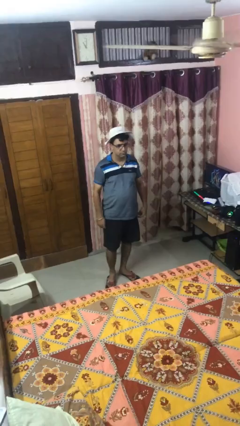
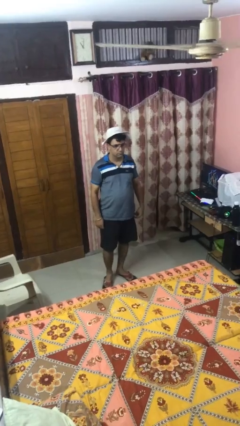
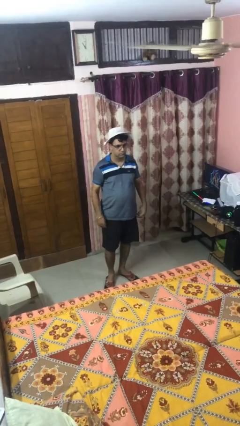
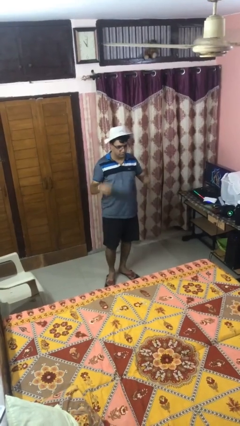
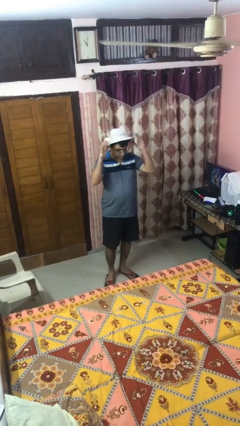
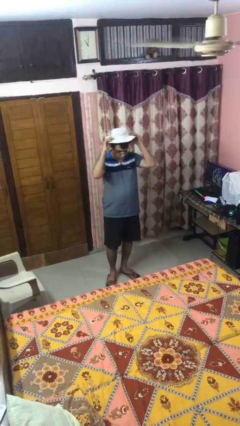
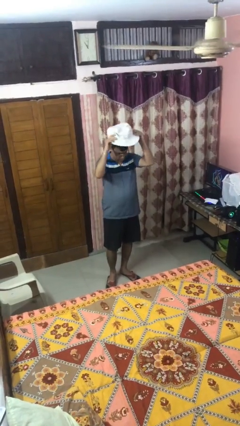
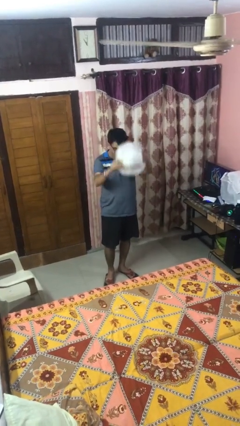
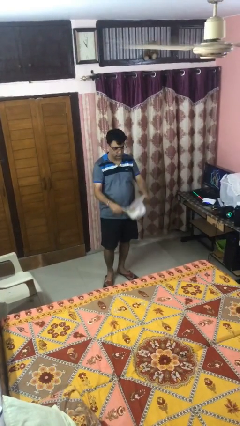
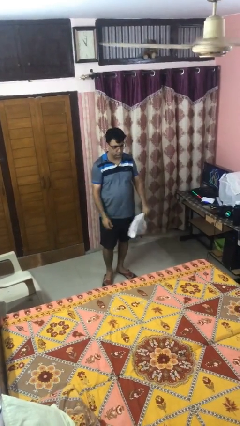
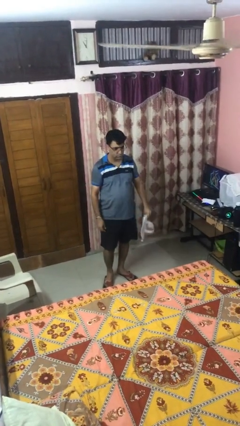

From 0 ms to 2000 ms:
person takes off hat

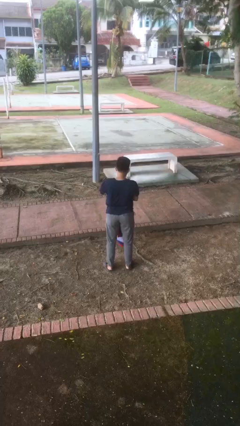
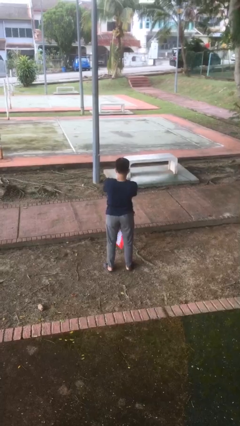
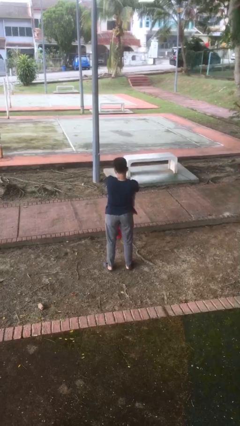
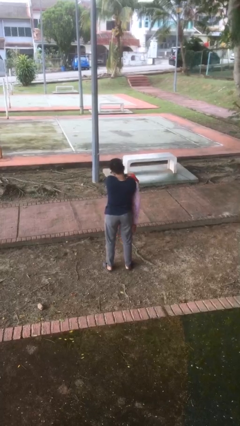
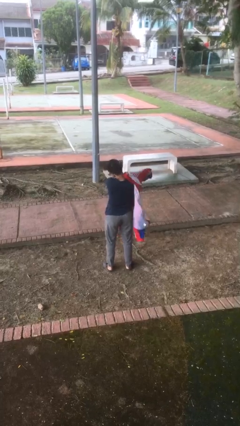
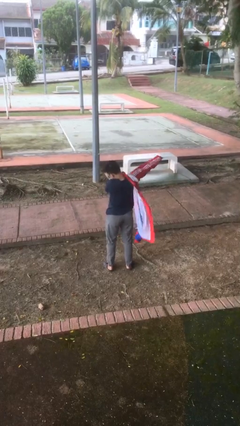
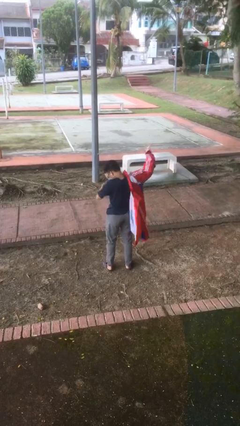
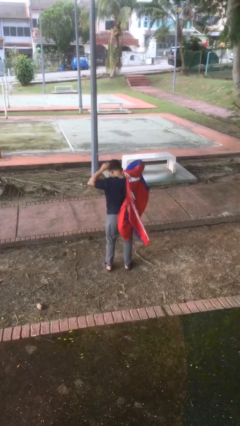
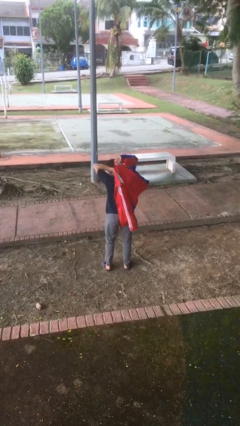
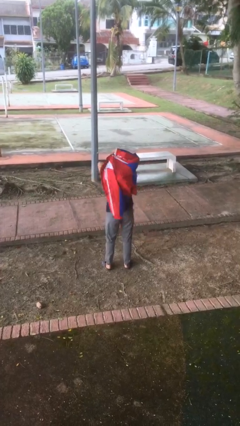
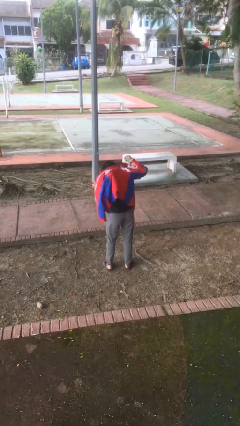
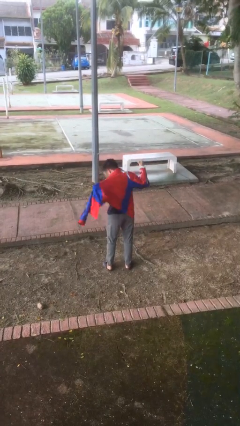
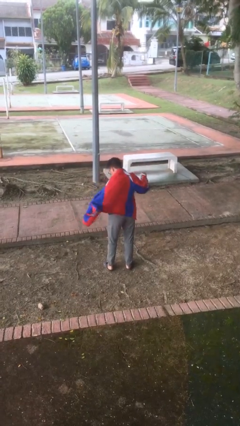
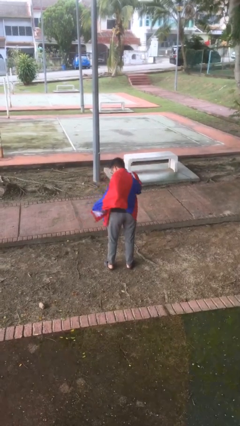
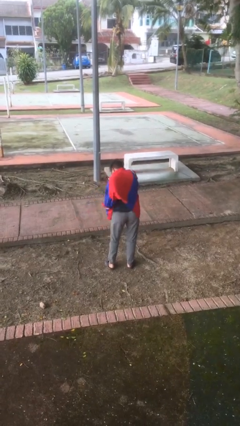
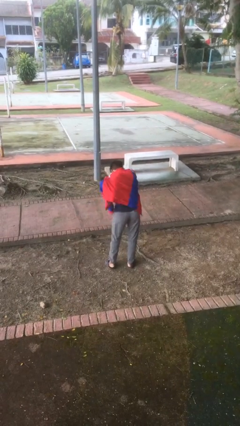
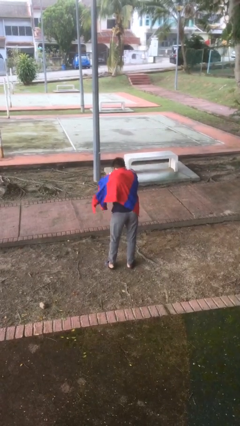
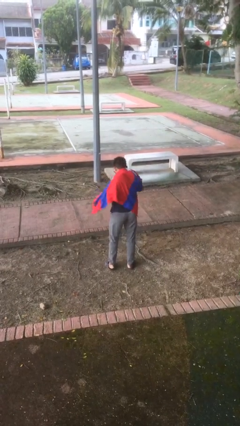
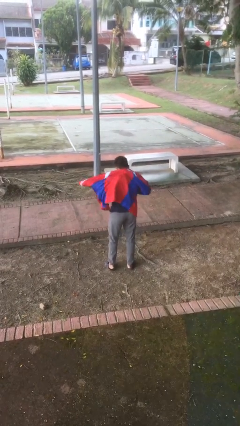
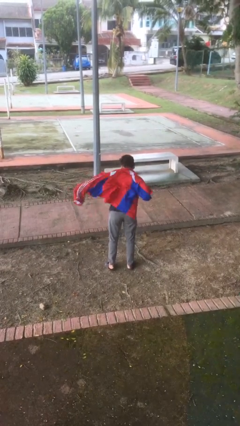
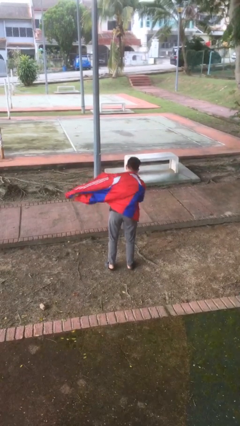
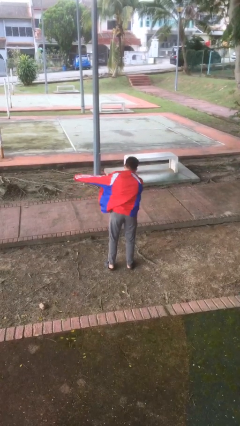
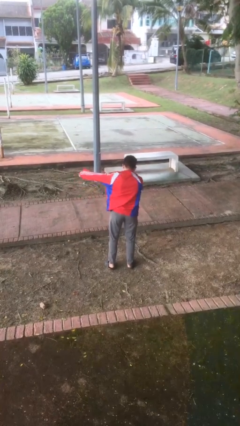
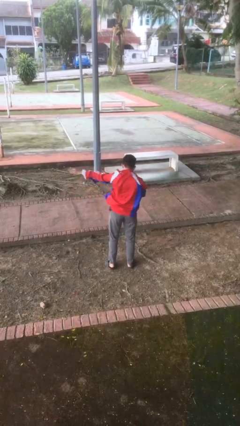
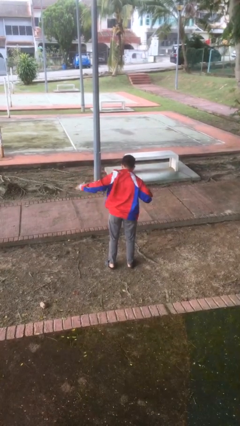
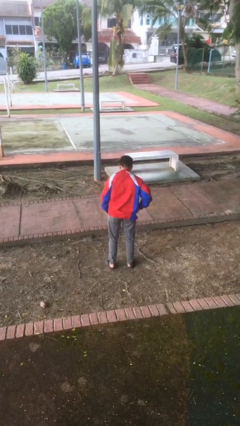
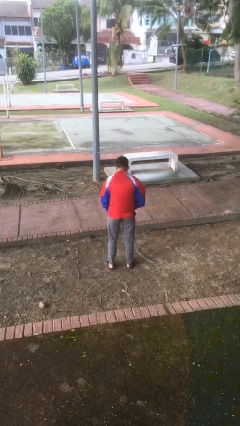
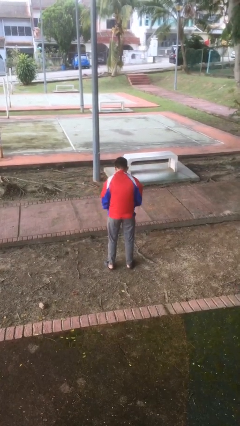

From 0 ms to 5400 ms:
person puts on jacket

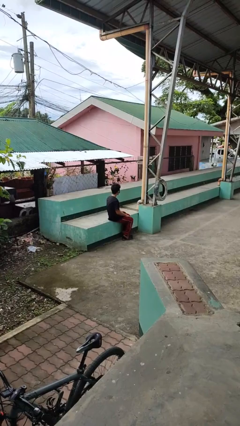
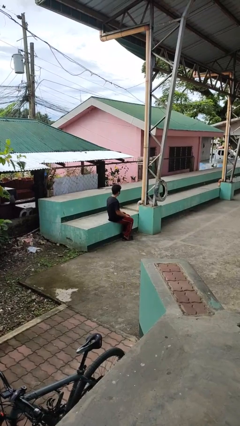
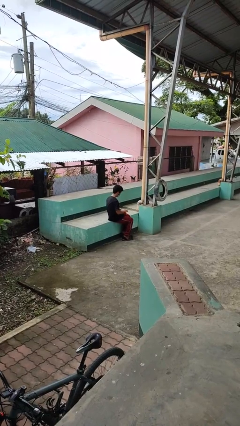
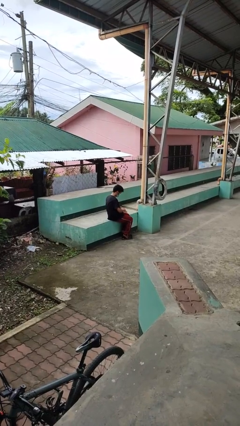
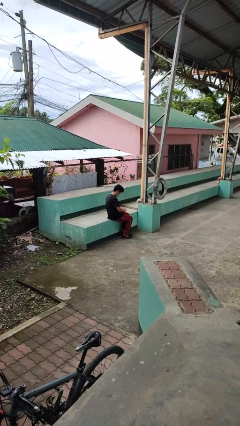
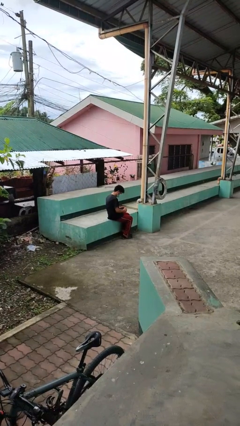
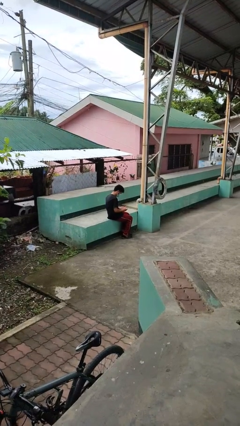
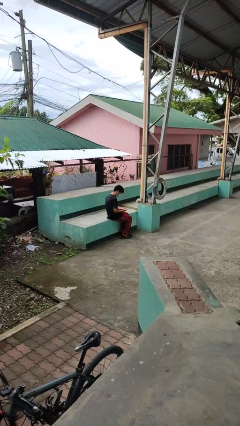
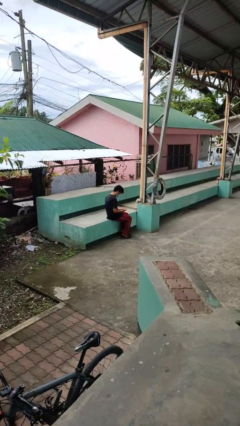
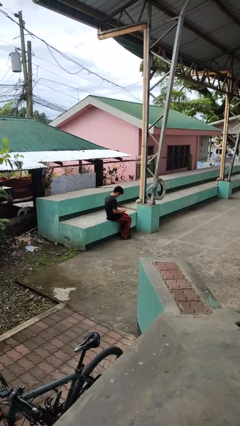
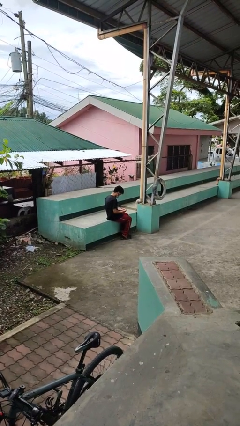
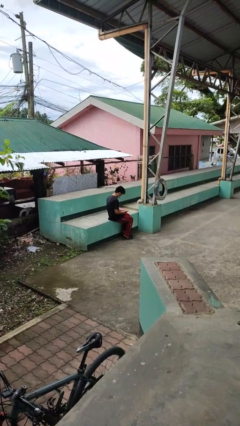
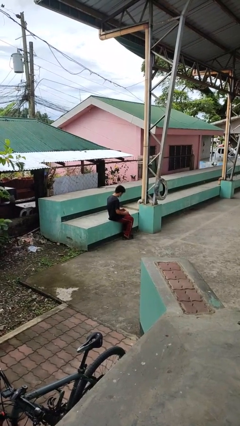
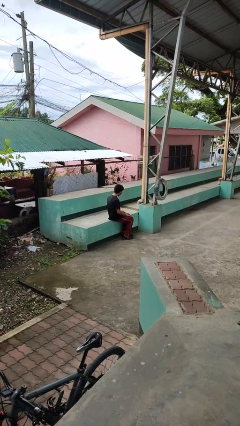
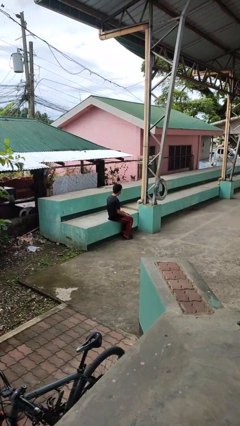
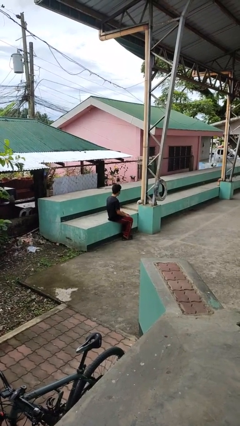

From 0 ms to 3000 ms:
person looks at hands in lap

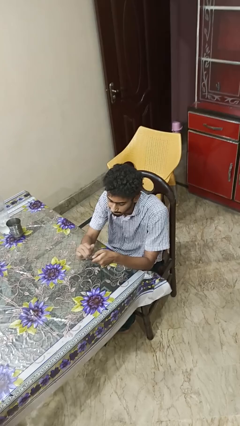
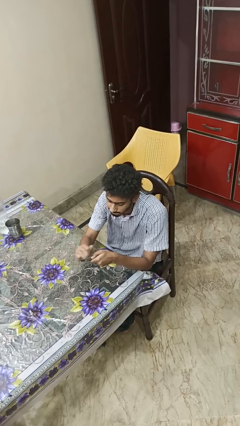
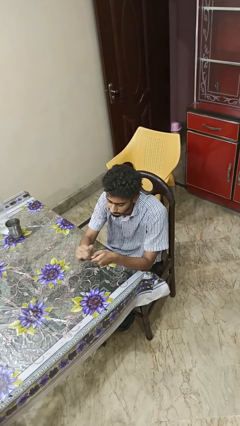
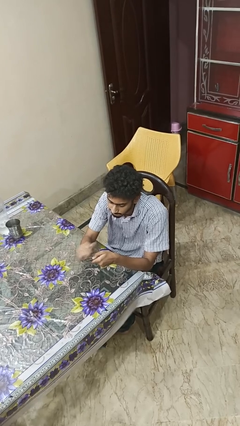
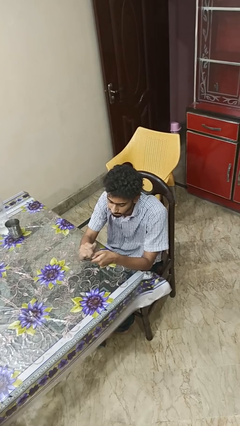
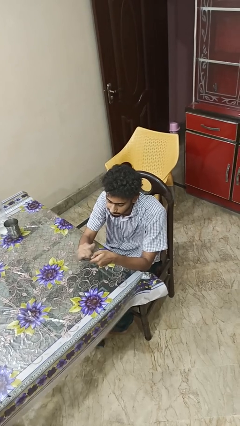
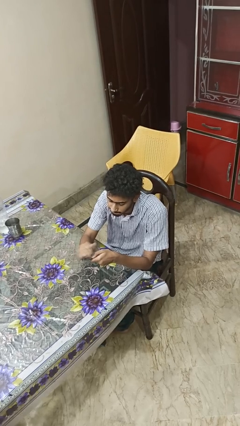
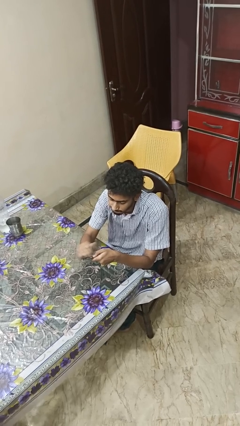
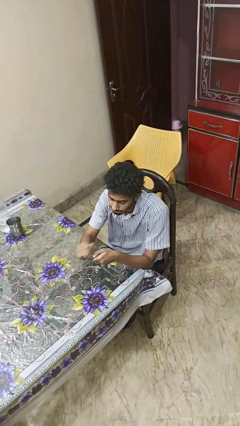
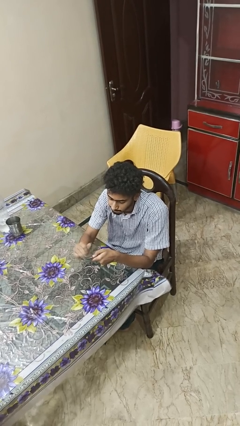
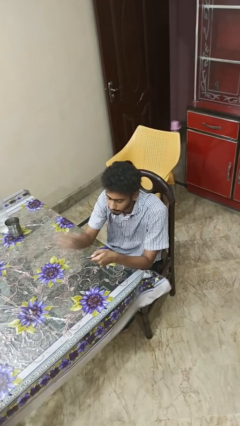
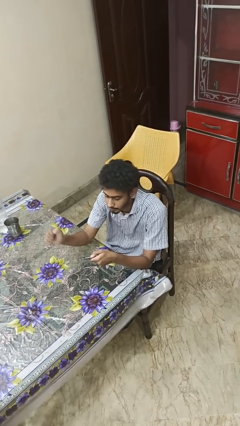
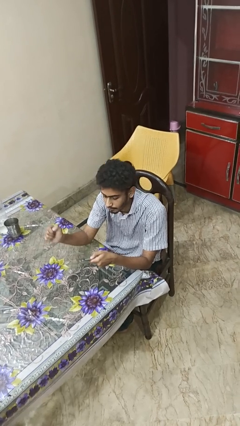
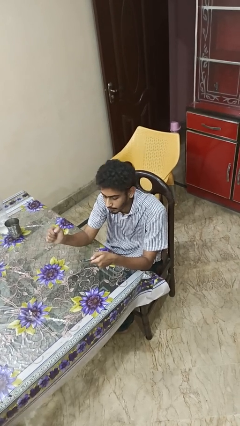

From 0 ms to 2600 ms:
person files fingernails

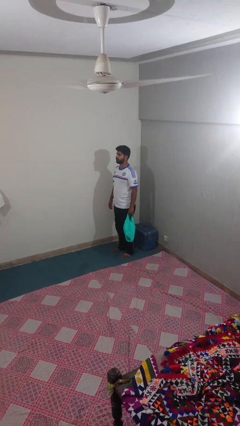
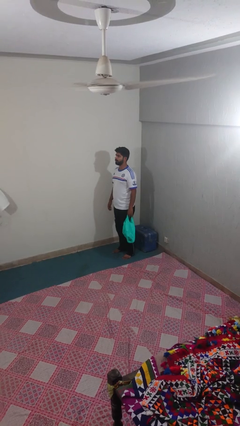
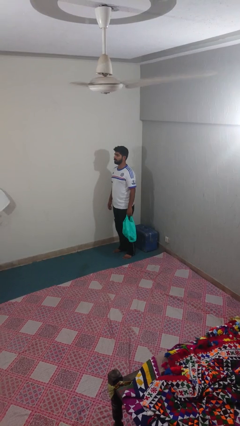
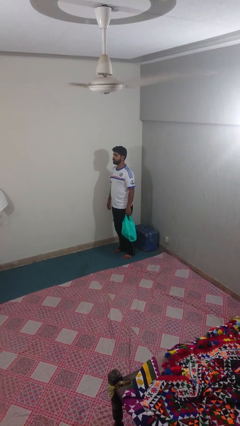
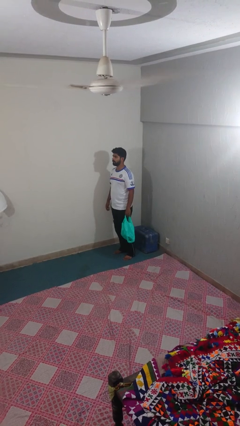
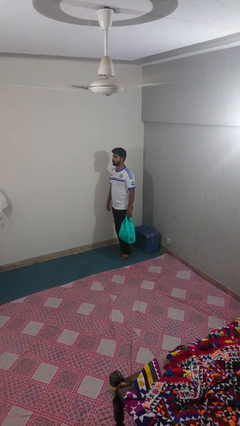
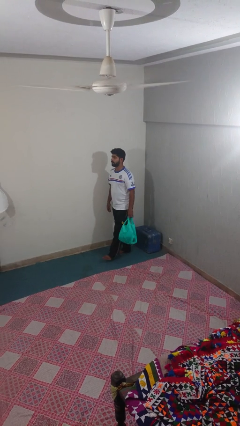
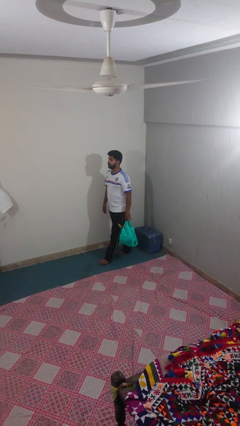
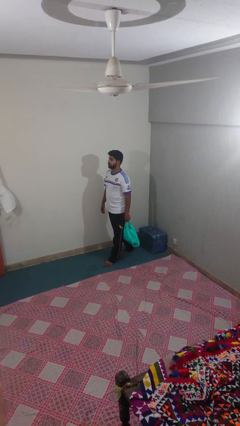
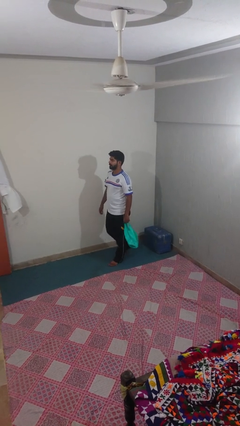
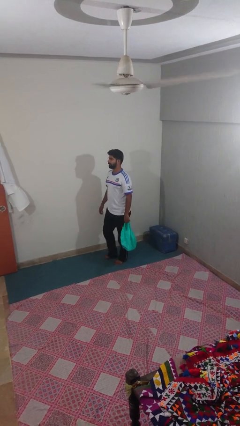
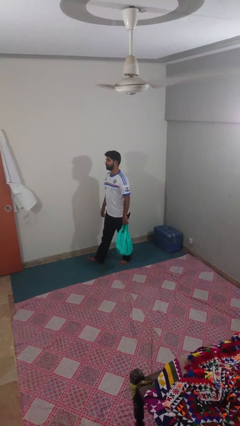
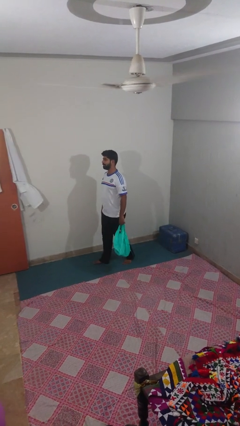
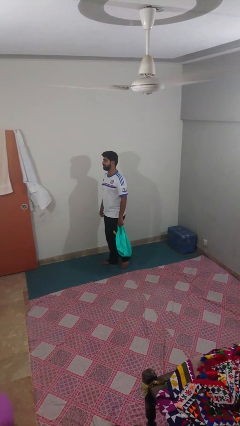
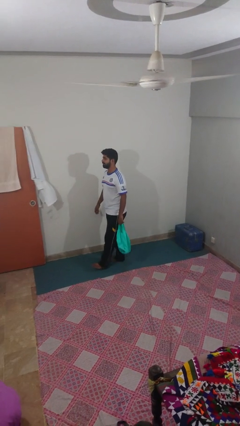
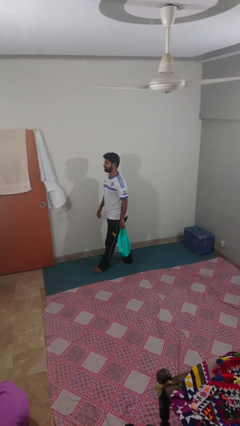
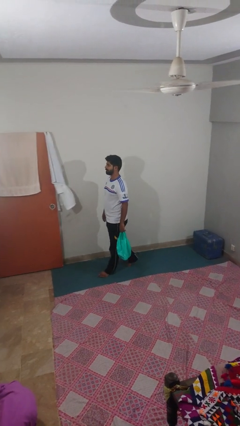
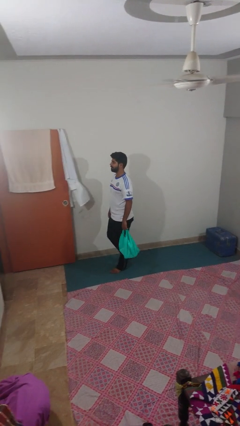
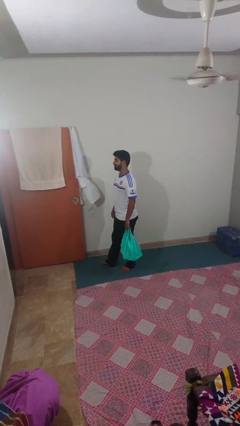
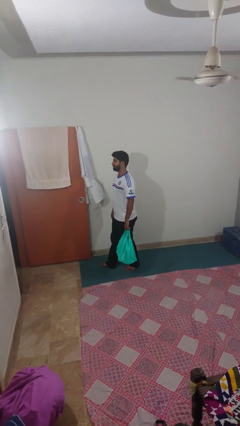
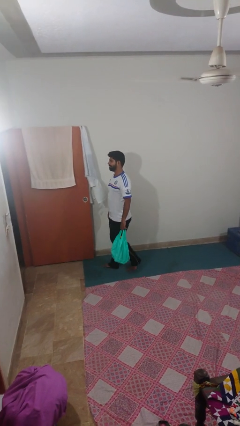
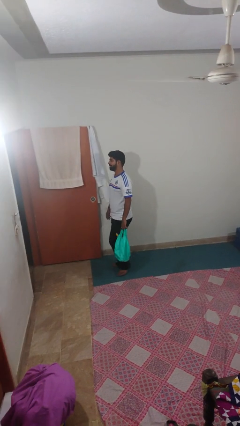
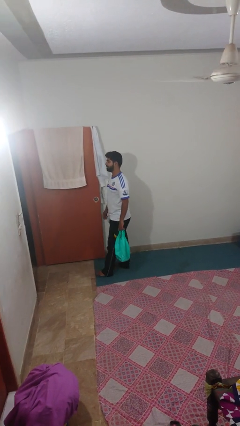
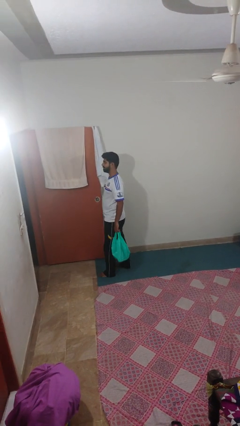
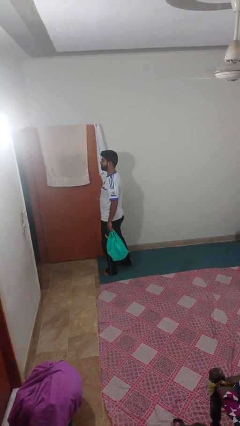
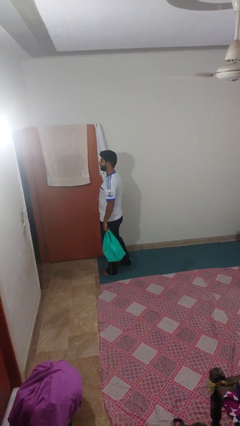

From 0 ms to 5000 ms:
person carries groceries
